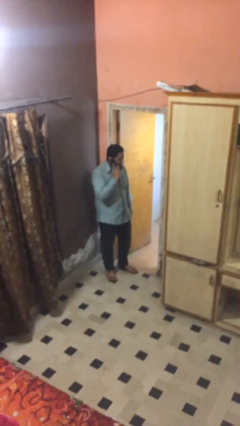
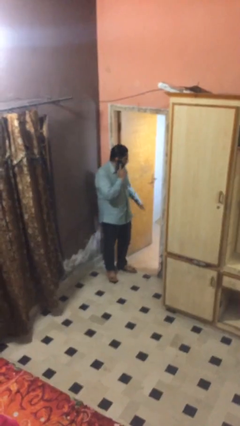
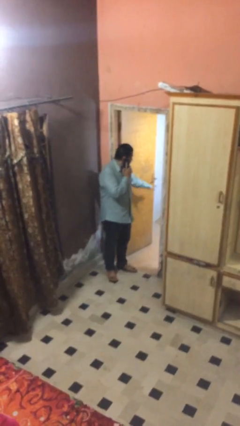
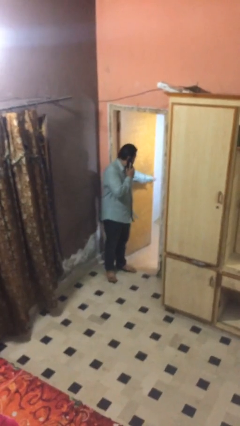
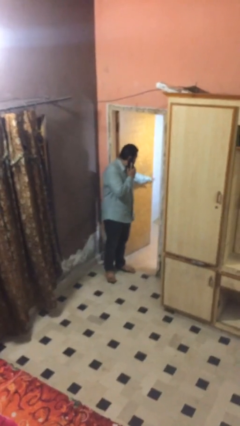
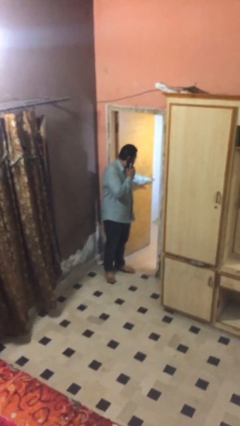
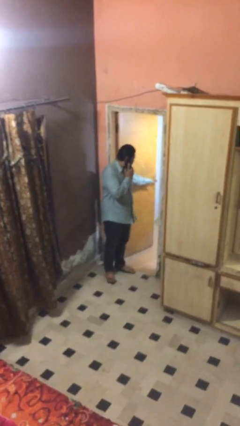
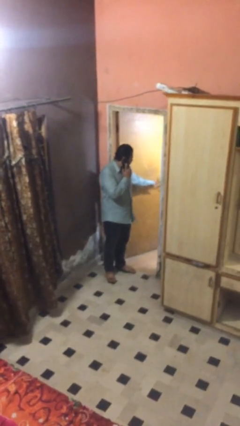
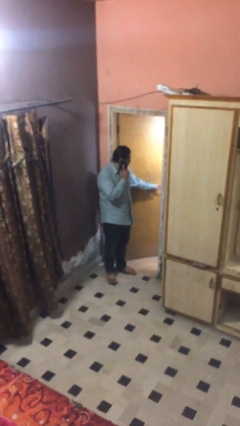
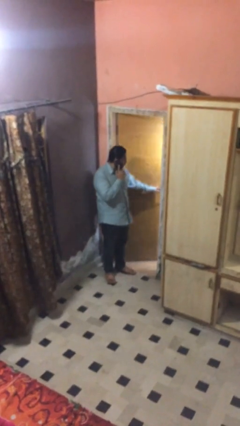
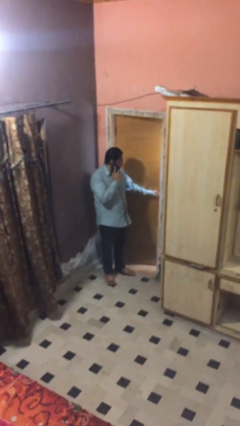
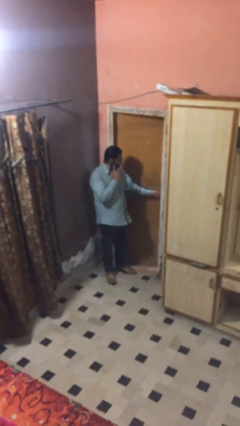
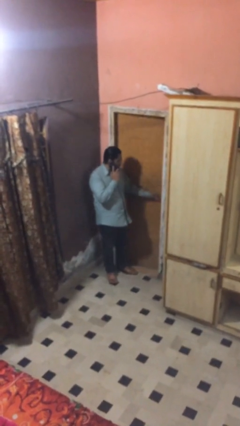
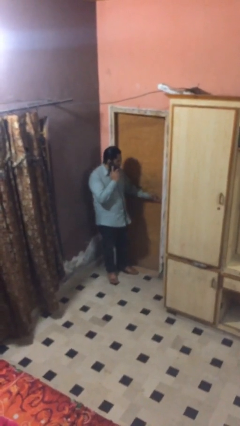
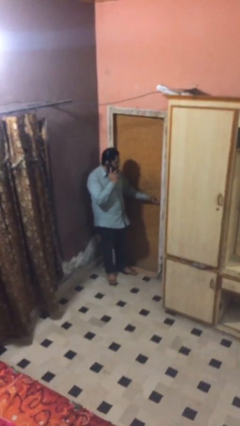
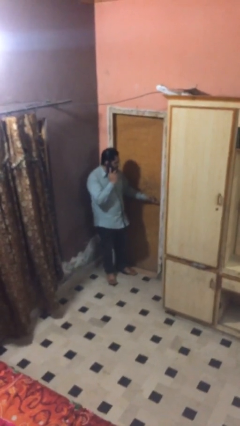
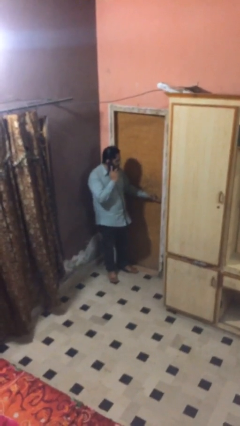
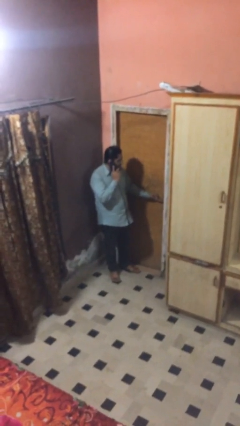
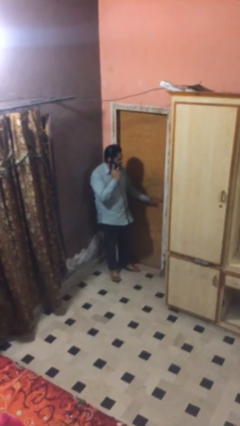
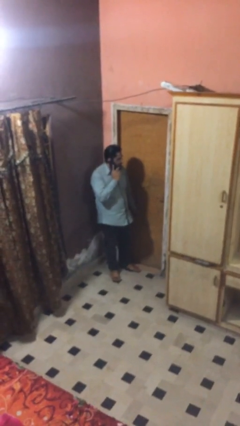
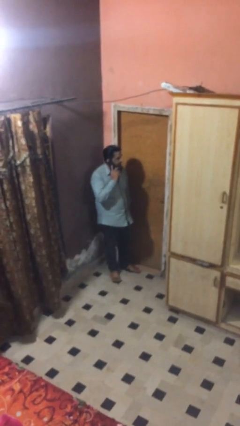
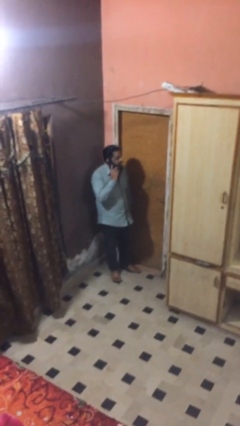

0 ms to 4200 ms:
person closes facility door

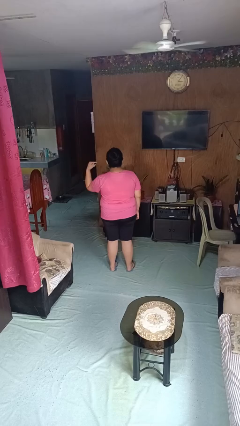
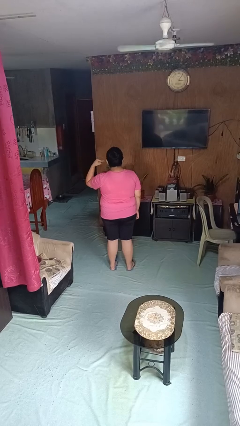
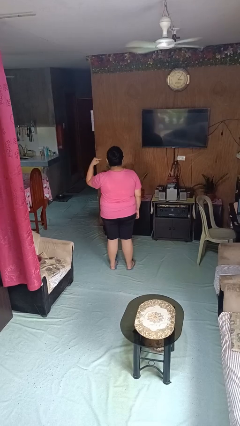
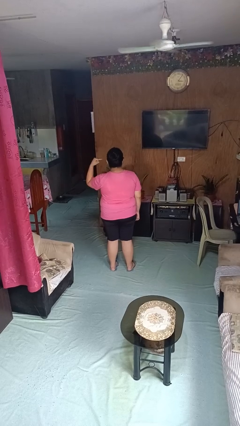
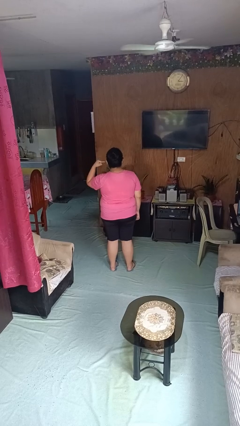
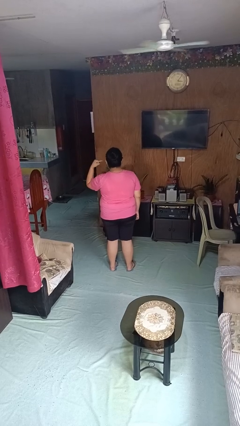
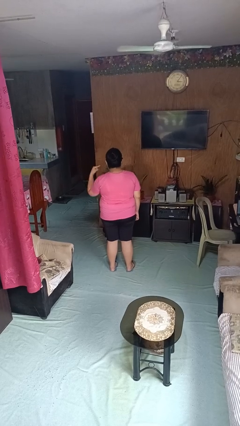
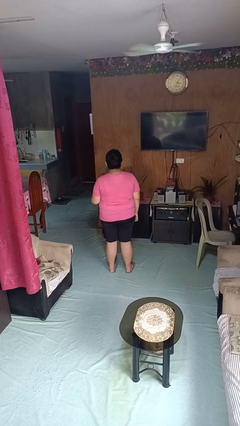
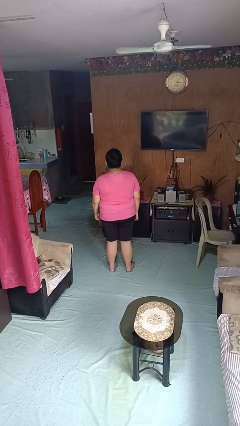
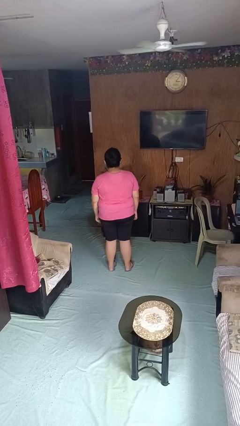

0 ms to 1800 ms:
person gestures listen closely

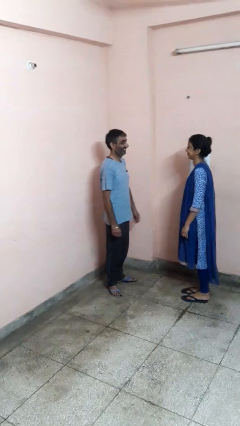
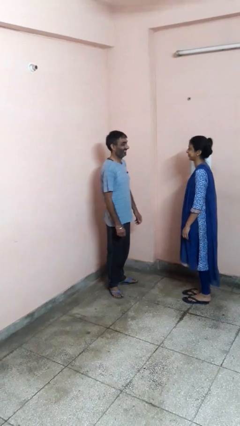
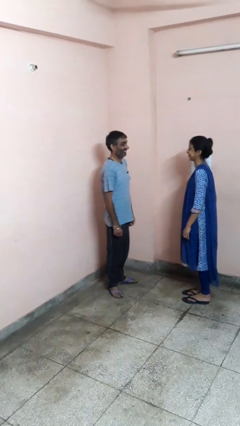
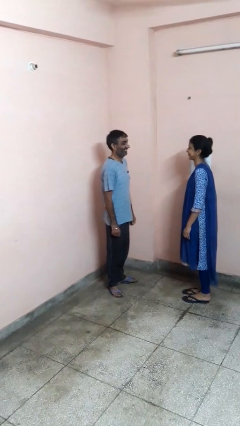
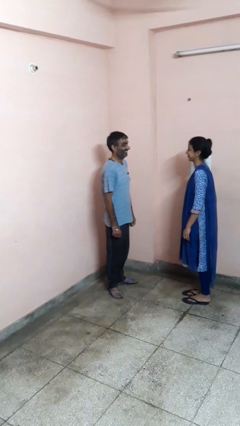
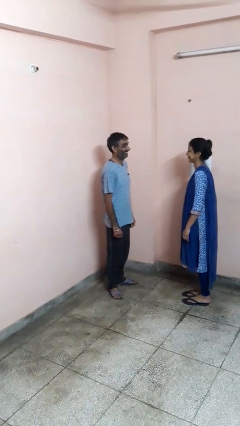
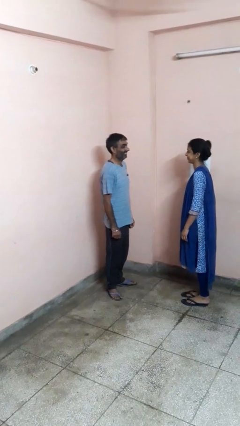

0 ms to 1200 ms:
person laughs with person

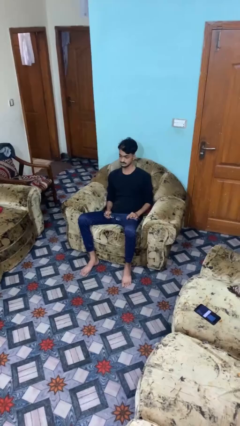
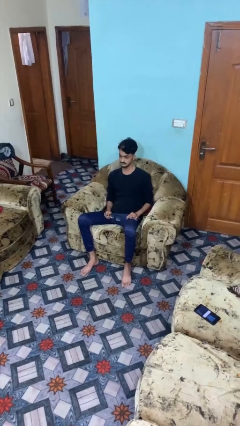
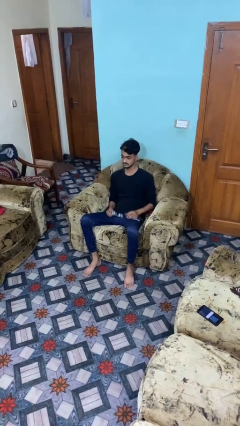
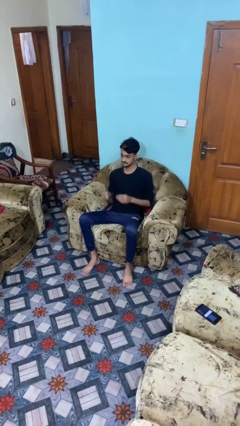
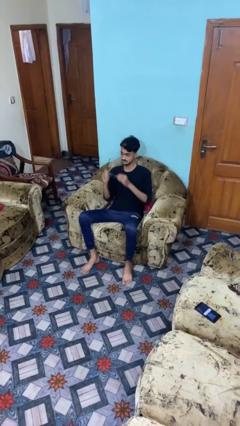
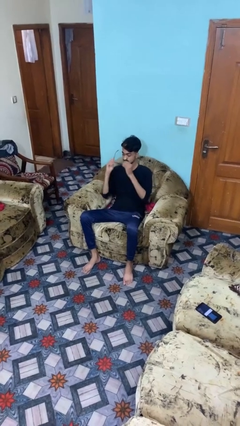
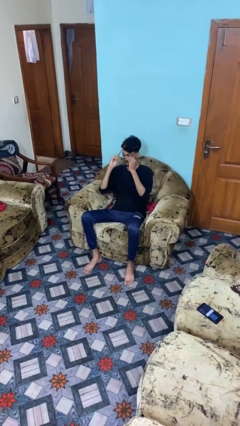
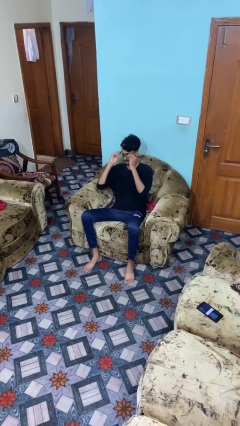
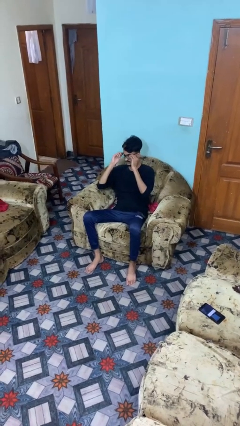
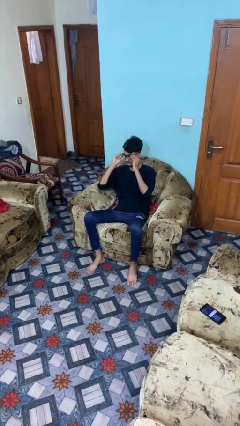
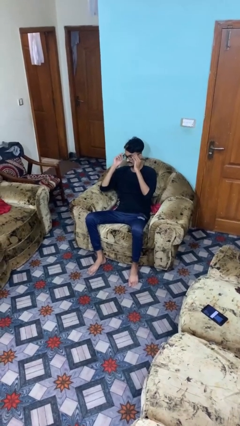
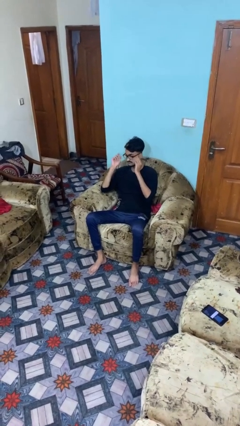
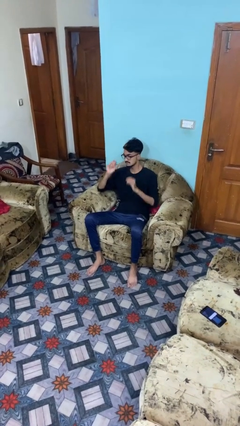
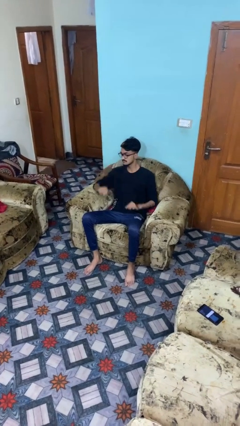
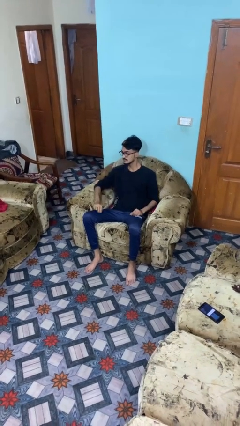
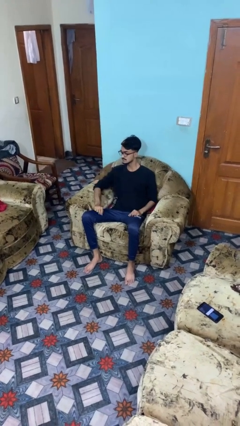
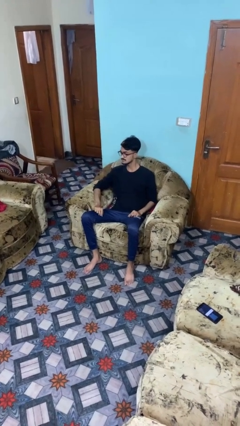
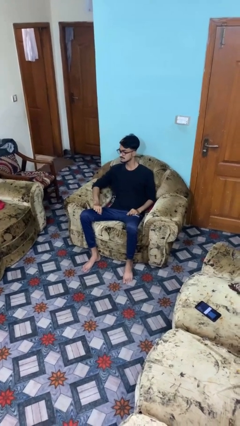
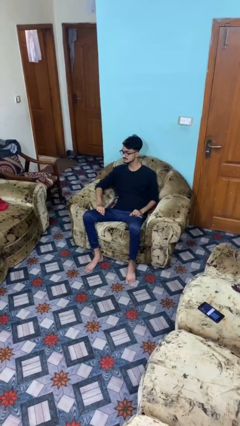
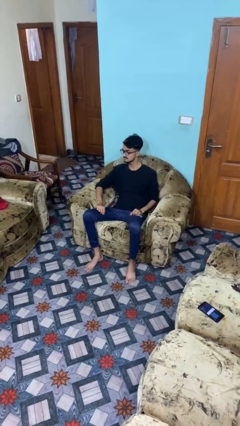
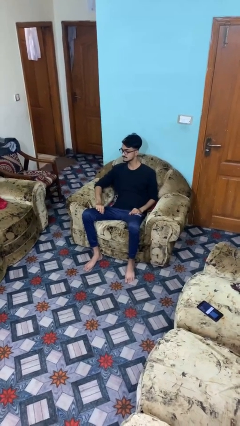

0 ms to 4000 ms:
person puts on glasses

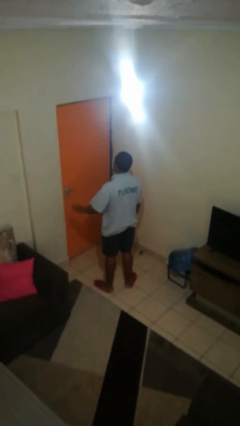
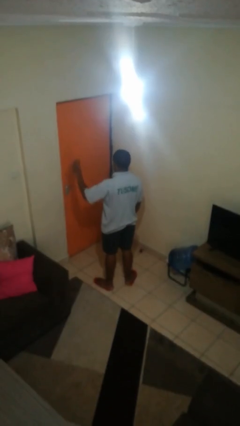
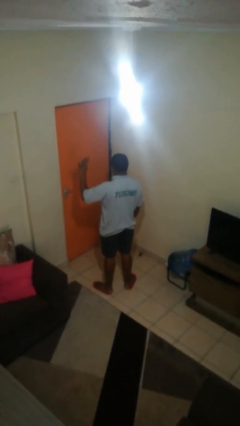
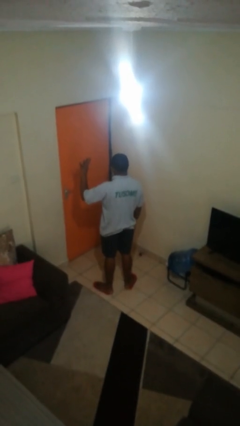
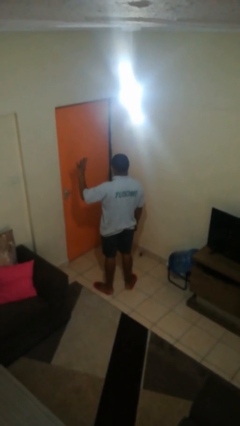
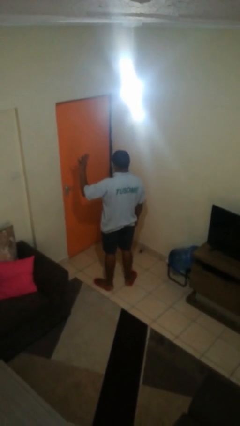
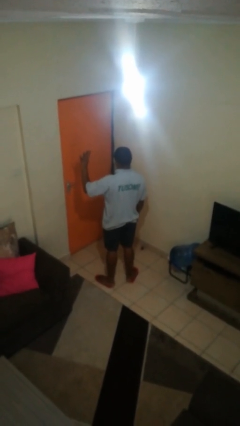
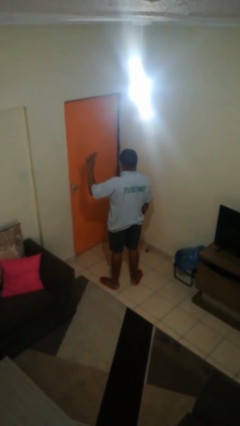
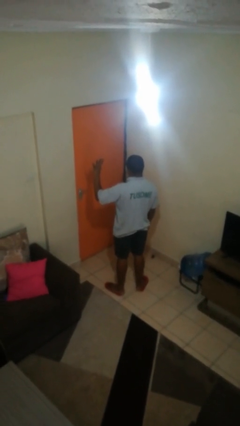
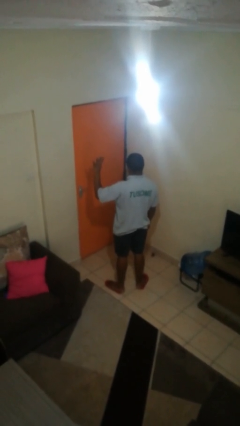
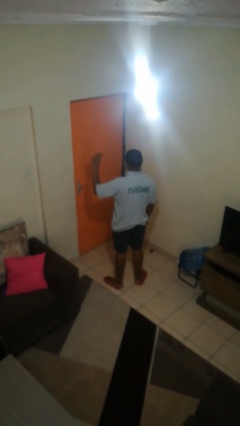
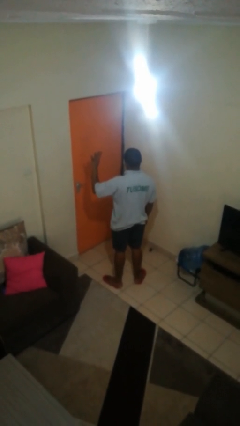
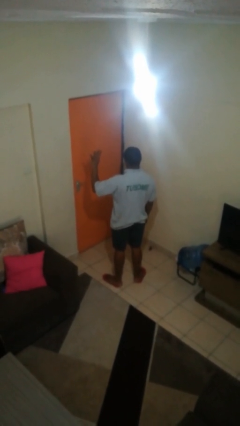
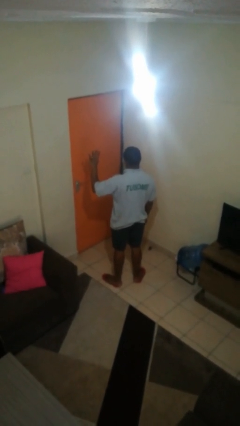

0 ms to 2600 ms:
person gestures number four

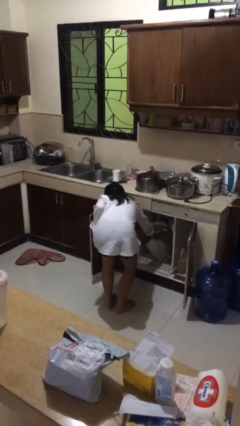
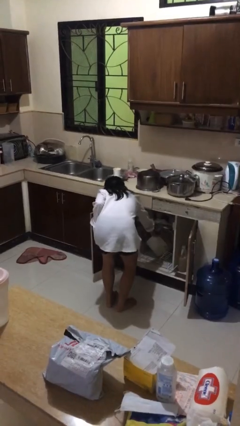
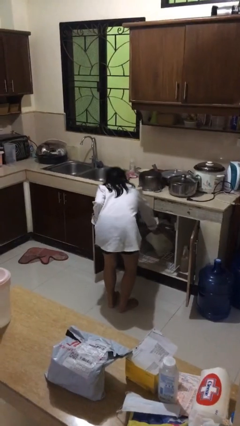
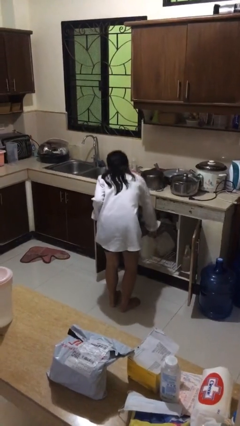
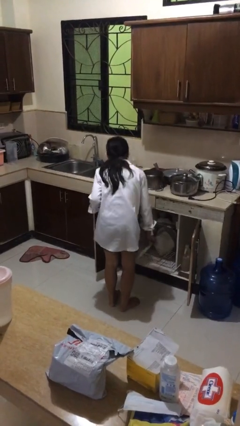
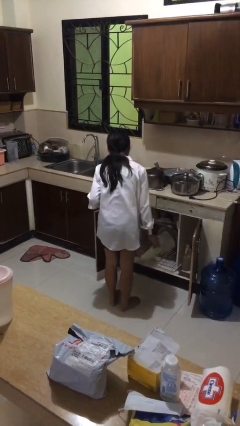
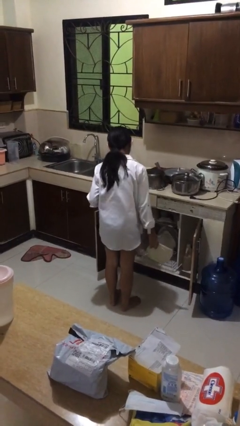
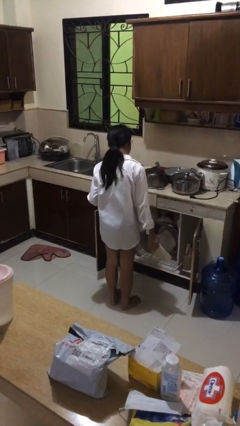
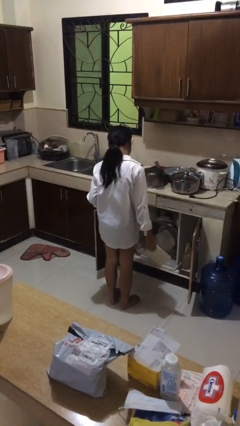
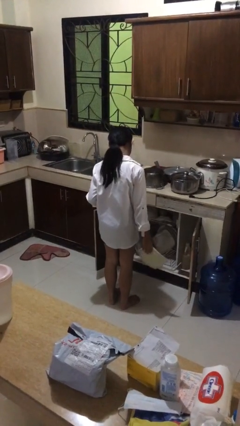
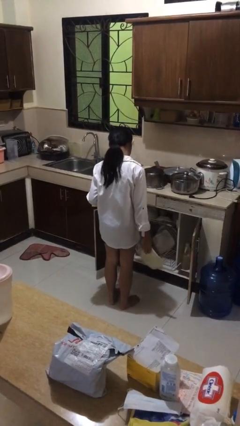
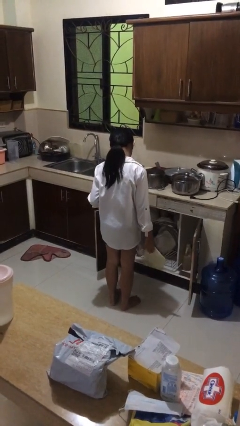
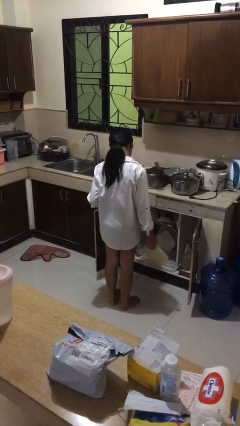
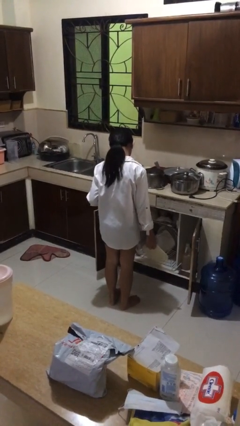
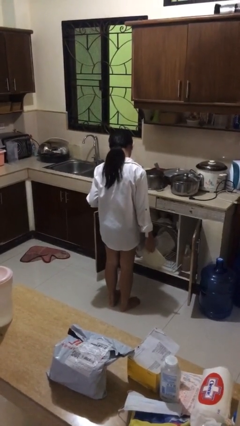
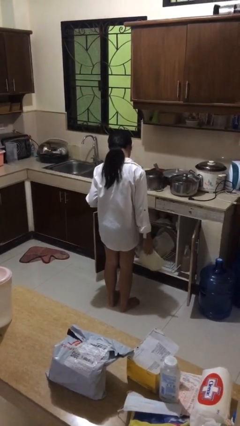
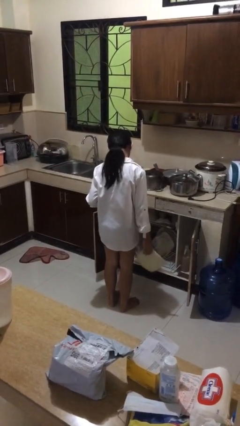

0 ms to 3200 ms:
person unloads dishwasher
